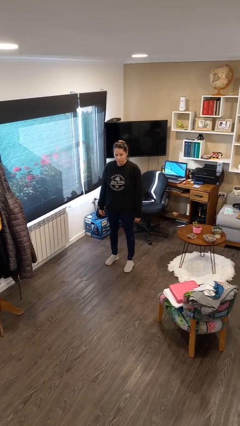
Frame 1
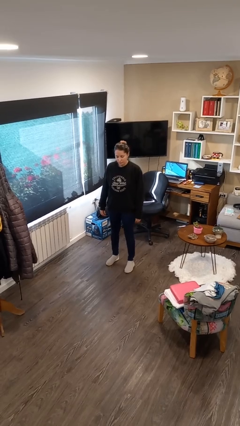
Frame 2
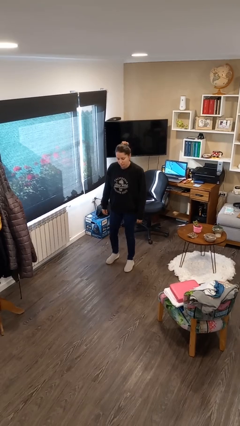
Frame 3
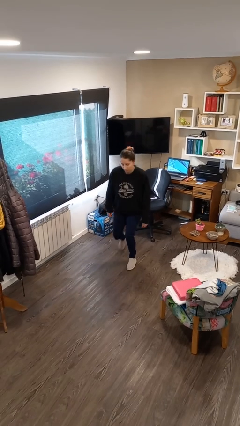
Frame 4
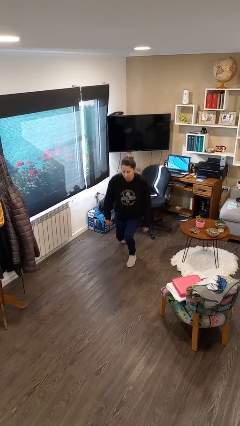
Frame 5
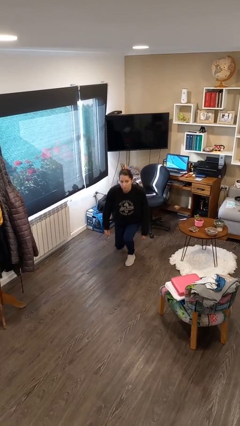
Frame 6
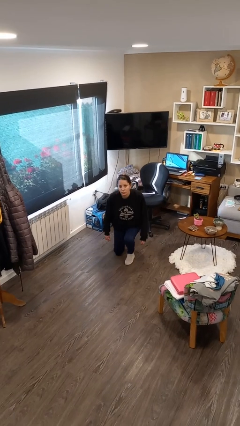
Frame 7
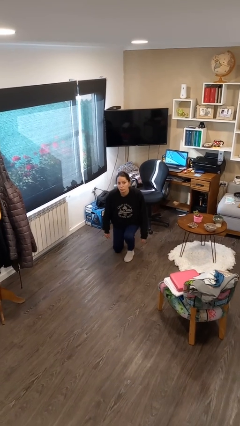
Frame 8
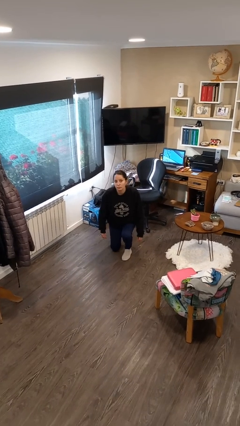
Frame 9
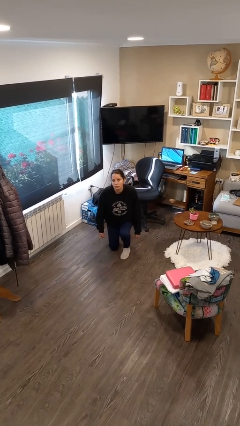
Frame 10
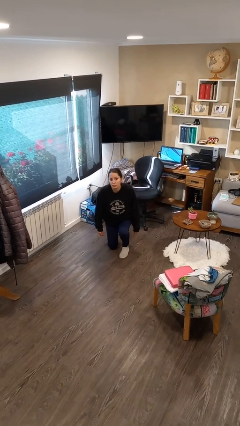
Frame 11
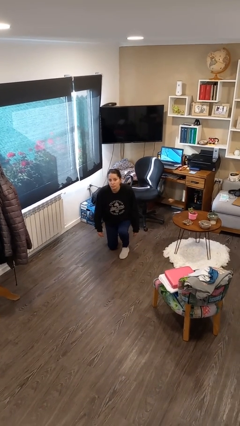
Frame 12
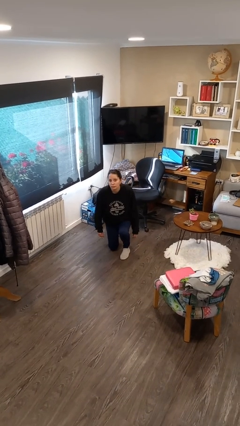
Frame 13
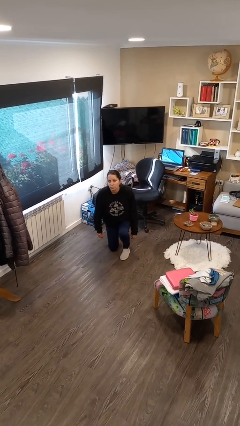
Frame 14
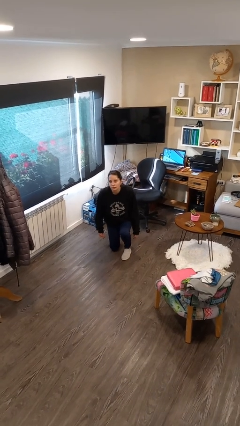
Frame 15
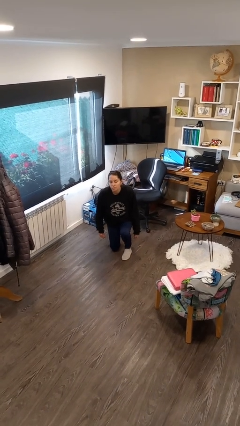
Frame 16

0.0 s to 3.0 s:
person kneels

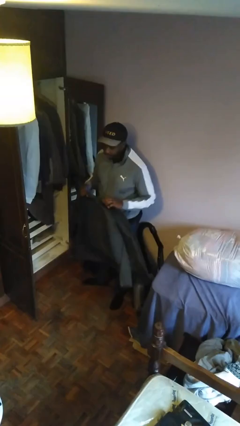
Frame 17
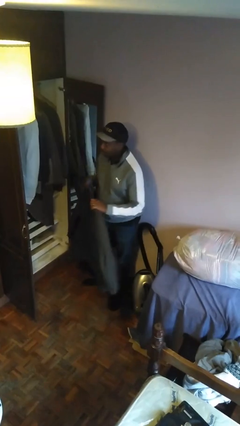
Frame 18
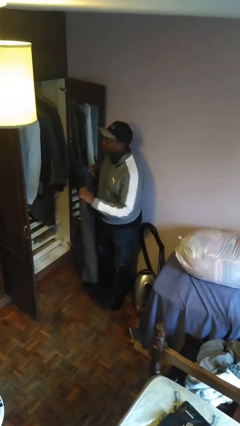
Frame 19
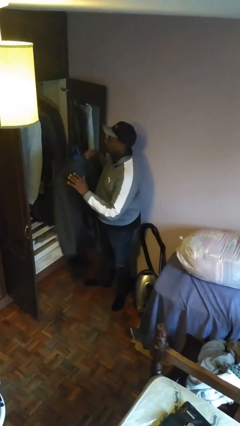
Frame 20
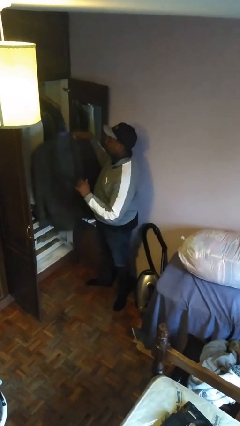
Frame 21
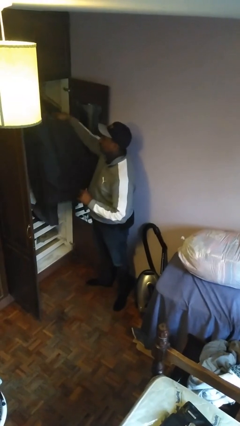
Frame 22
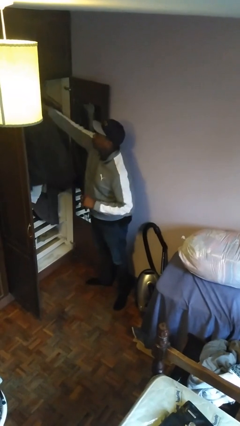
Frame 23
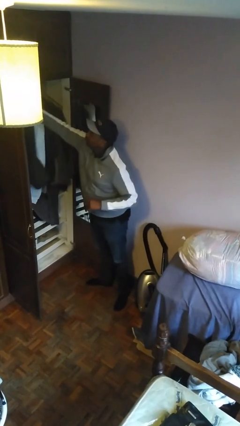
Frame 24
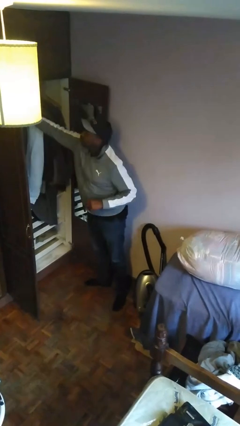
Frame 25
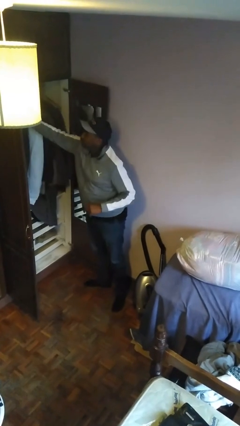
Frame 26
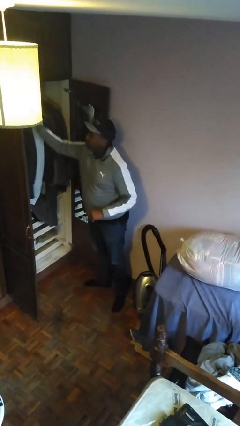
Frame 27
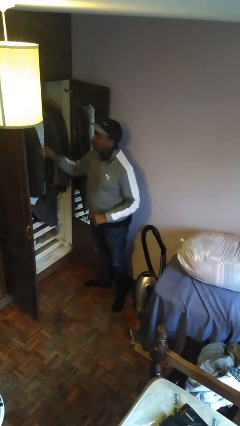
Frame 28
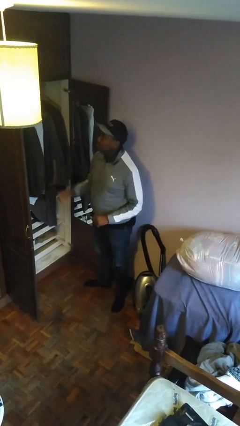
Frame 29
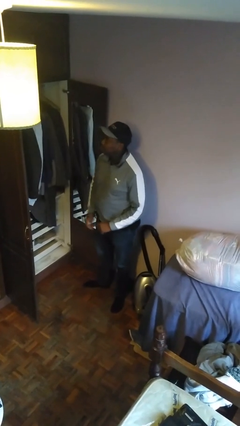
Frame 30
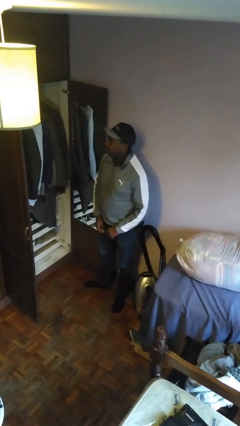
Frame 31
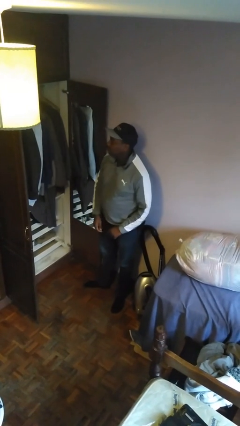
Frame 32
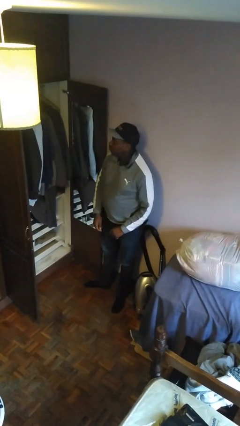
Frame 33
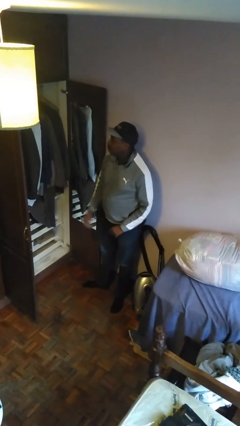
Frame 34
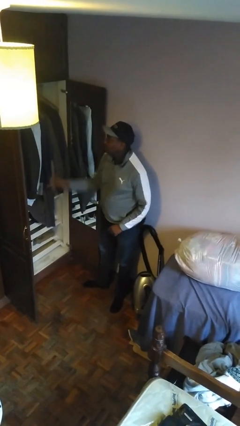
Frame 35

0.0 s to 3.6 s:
person puts clothes into closet

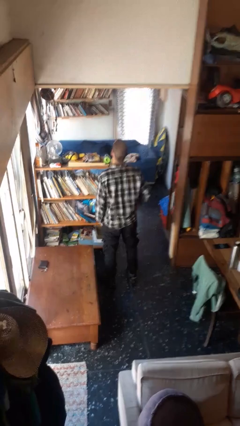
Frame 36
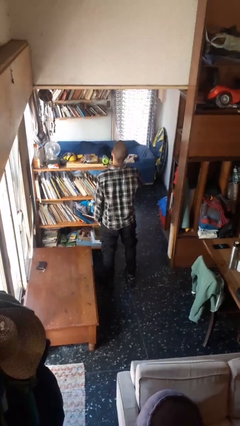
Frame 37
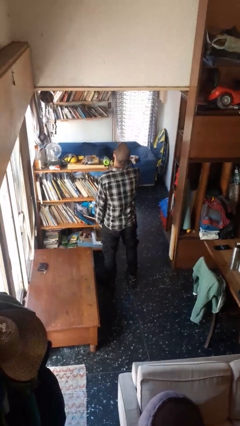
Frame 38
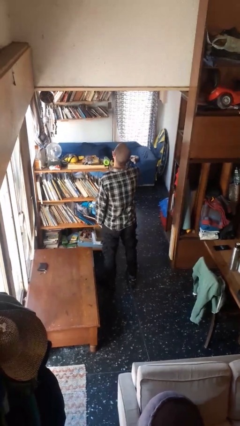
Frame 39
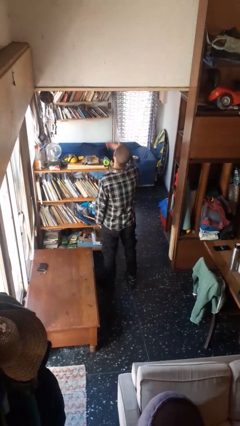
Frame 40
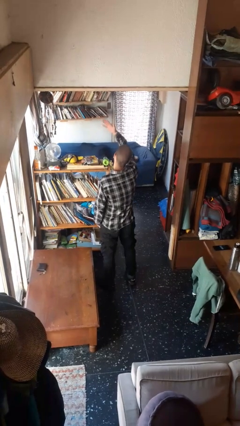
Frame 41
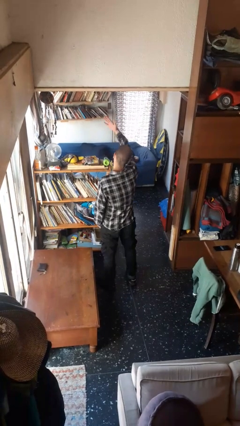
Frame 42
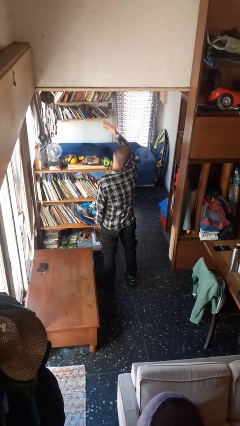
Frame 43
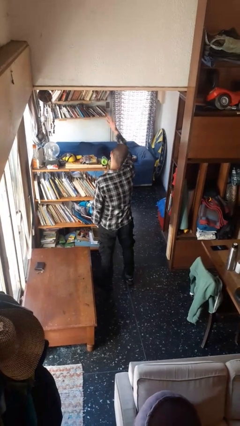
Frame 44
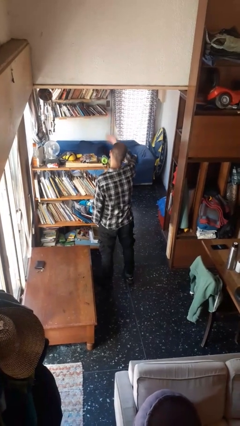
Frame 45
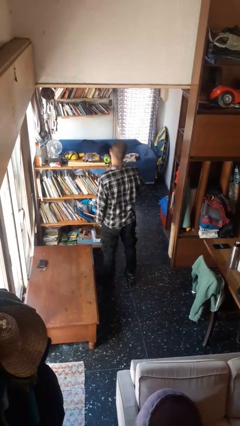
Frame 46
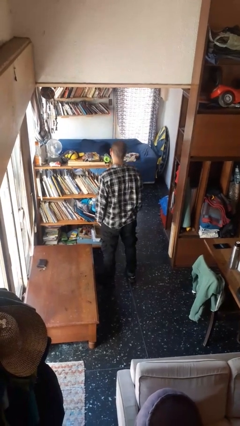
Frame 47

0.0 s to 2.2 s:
person gestures blow kiss

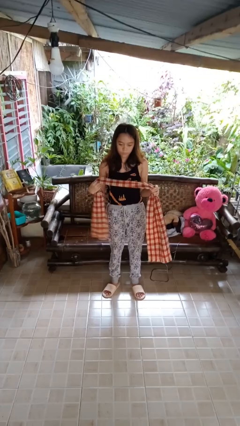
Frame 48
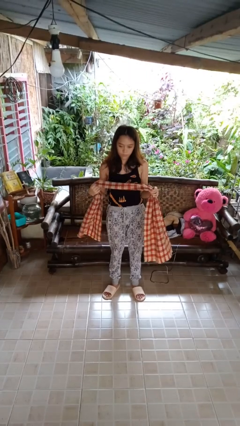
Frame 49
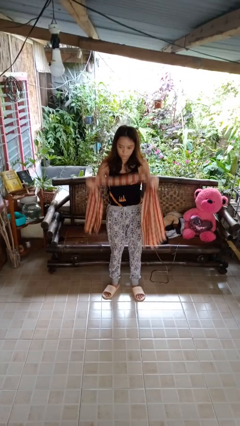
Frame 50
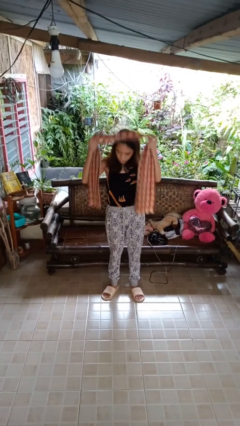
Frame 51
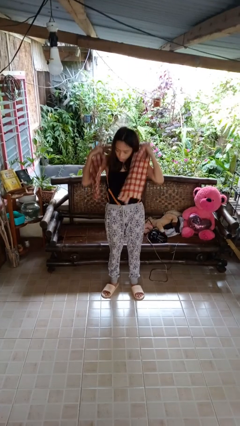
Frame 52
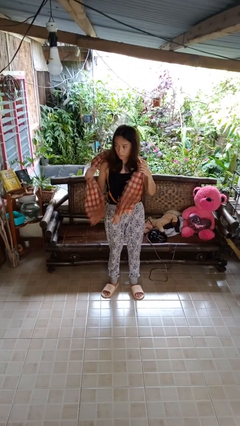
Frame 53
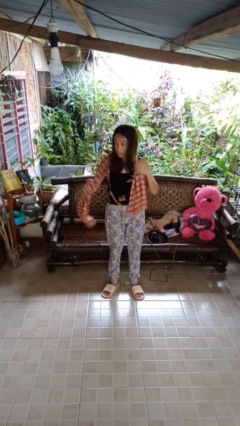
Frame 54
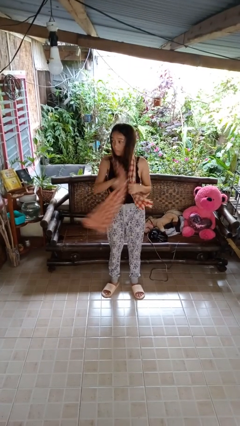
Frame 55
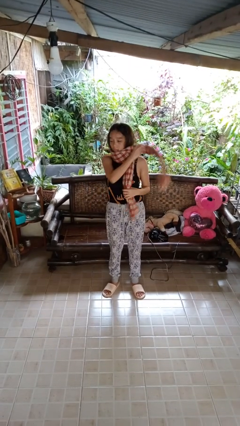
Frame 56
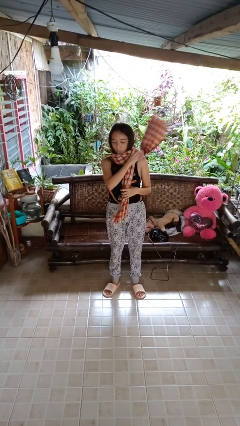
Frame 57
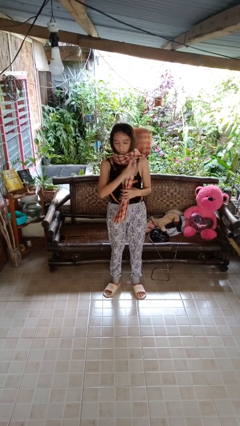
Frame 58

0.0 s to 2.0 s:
person puts on scarf

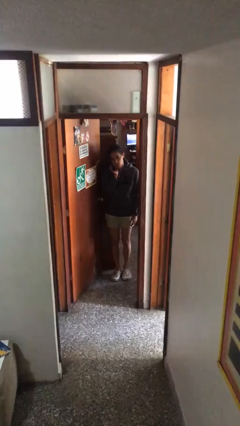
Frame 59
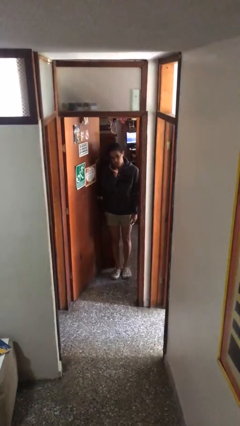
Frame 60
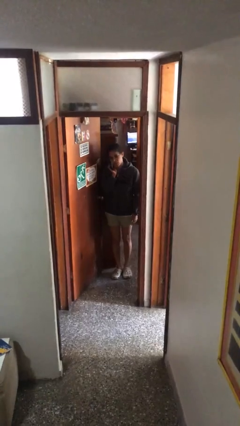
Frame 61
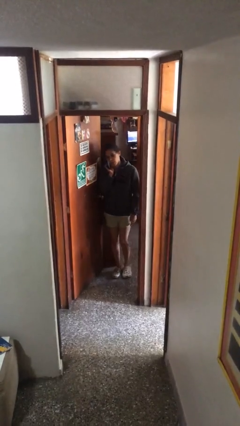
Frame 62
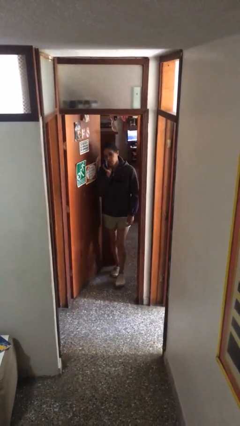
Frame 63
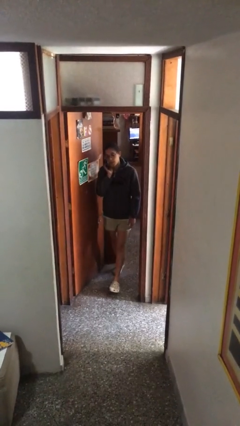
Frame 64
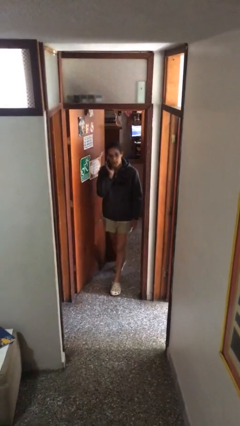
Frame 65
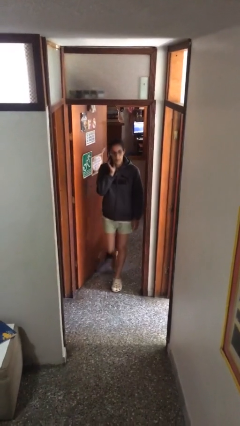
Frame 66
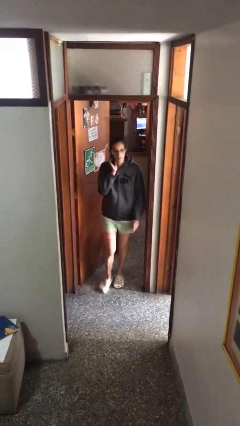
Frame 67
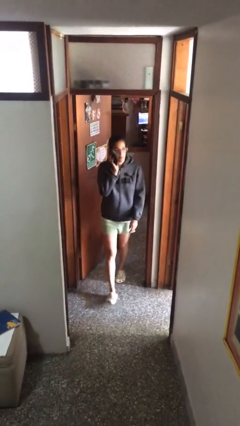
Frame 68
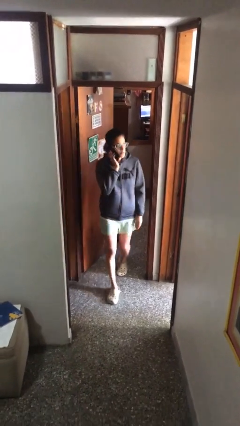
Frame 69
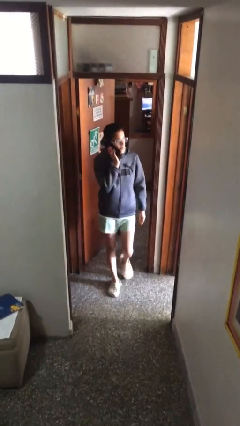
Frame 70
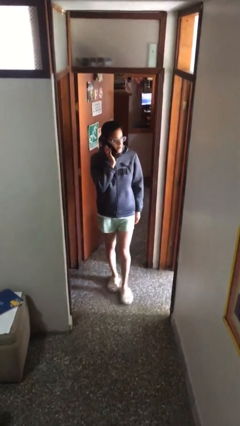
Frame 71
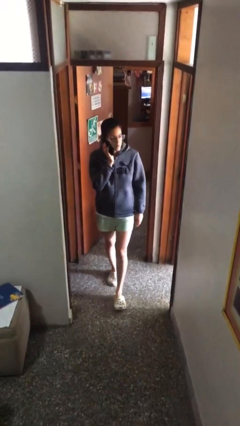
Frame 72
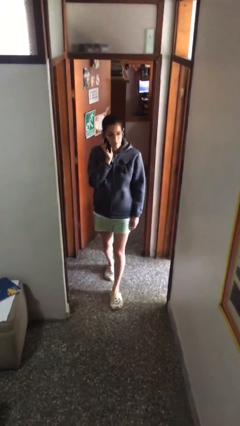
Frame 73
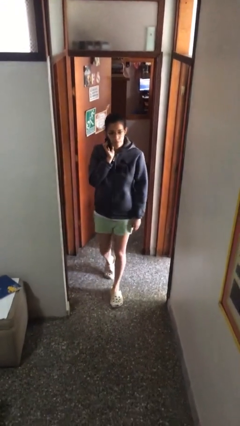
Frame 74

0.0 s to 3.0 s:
person enters scene through structure

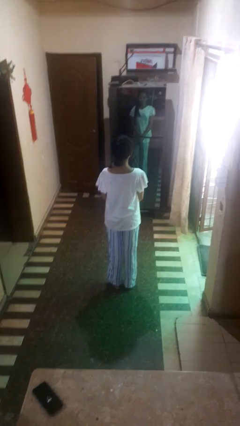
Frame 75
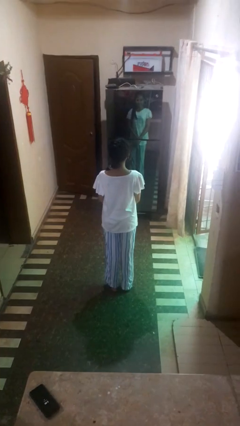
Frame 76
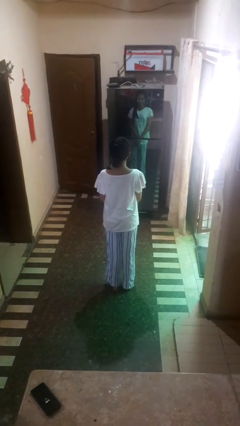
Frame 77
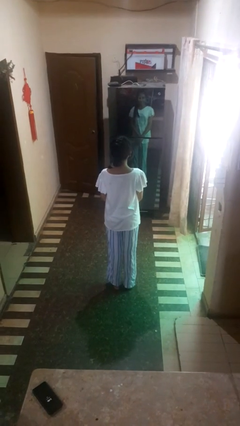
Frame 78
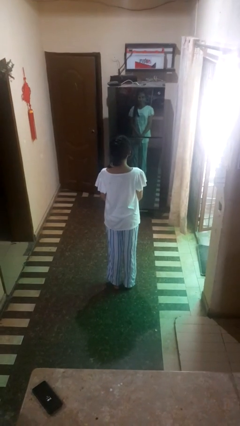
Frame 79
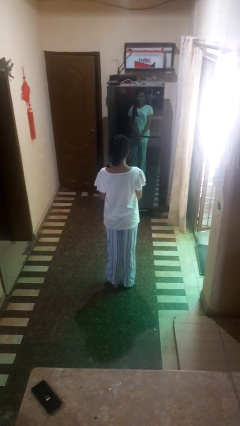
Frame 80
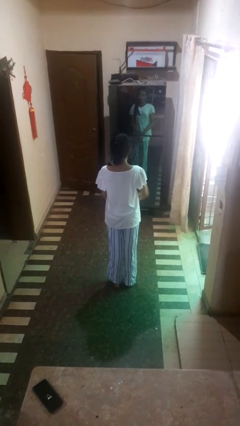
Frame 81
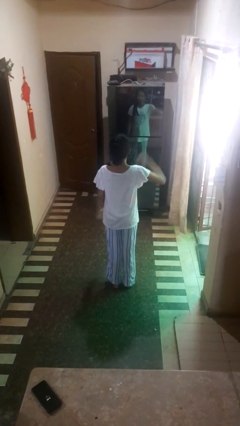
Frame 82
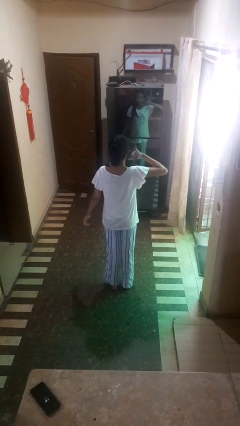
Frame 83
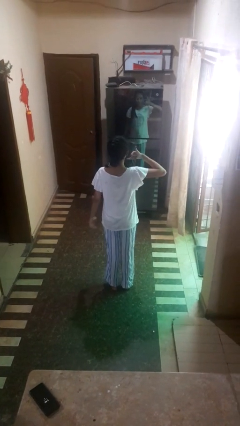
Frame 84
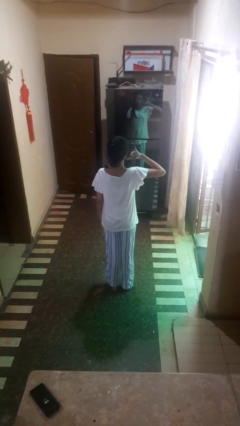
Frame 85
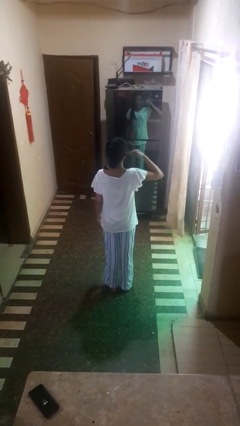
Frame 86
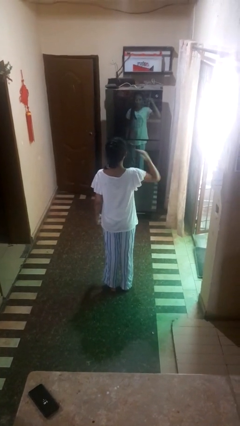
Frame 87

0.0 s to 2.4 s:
person gestures call me

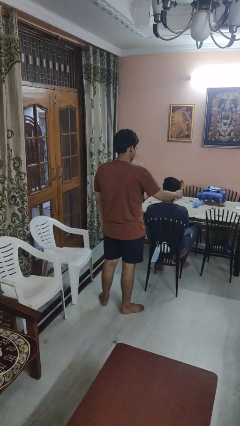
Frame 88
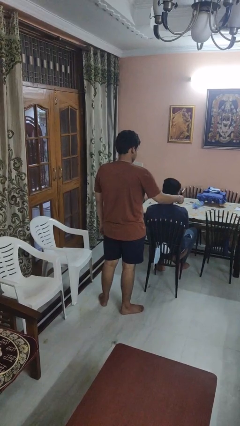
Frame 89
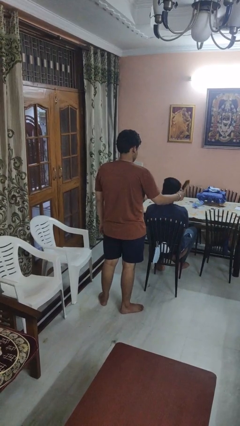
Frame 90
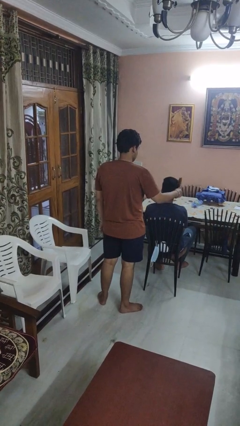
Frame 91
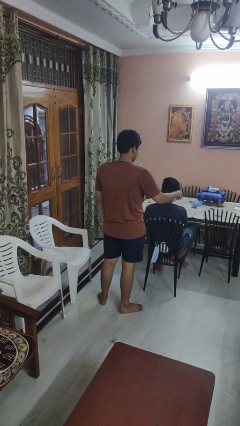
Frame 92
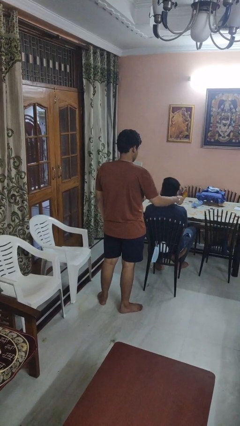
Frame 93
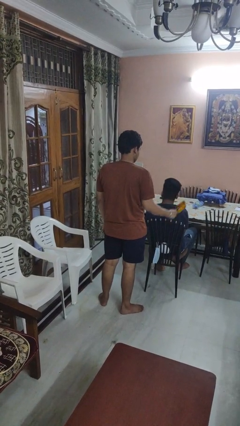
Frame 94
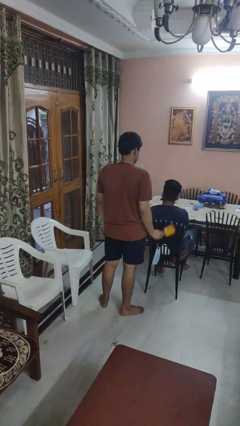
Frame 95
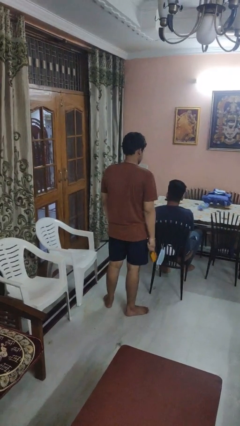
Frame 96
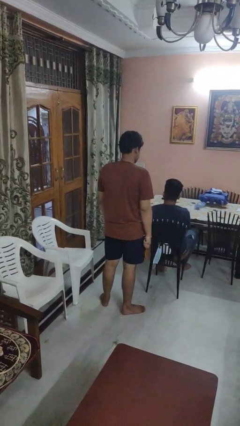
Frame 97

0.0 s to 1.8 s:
person brushes hair of person
